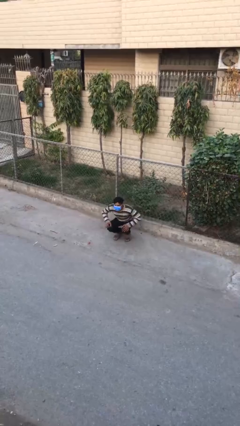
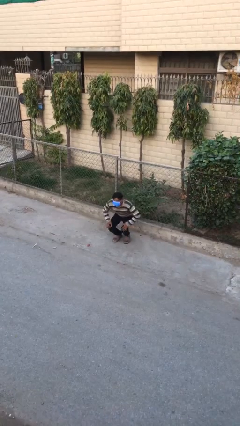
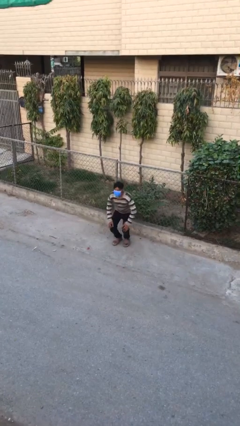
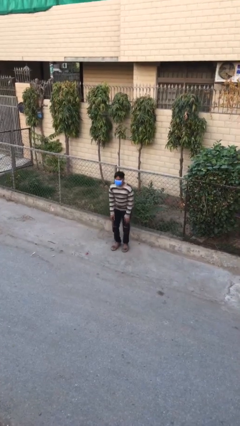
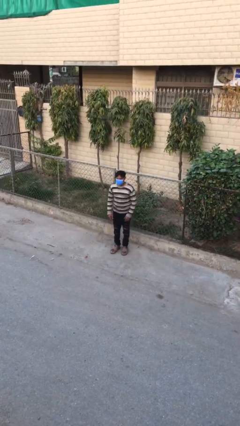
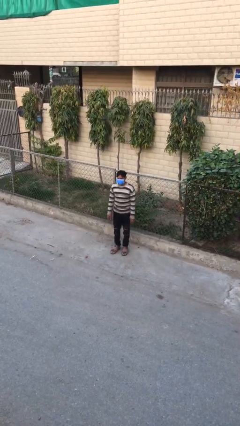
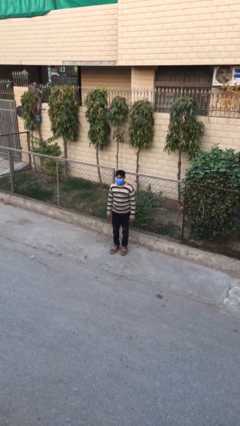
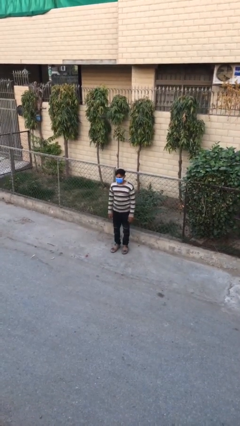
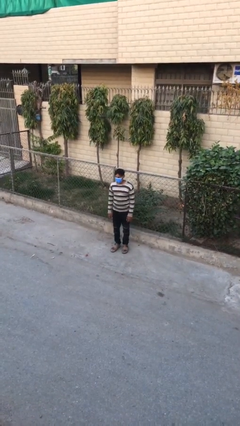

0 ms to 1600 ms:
person stands up

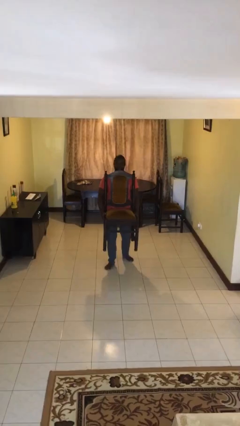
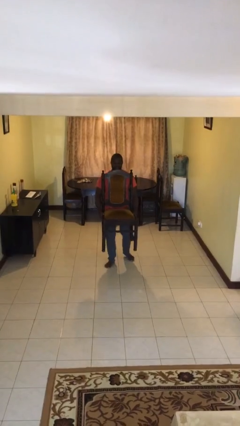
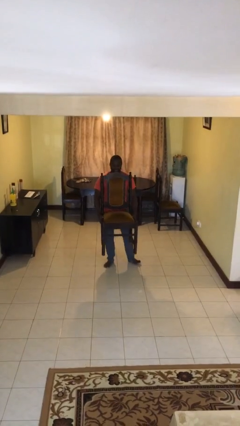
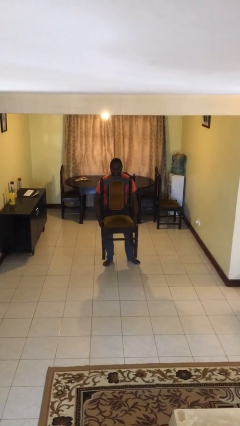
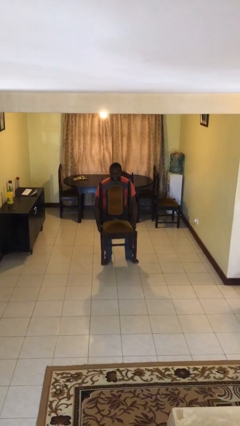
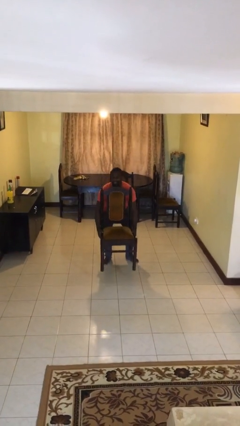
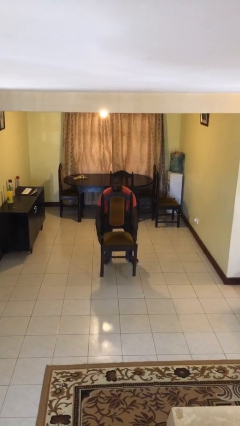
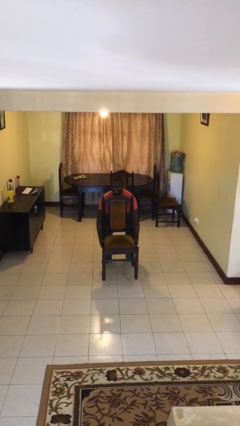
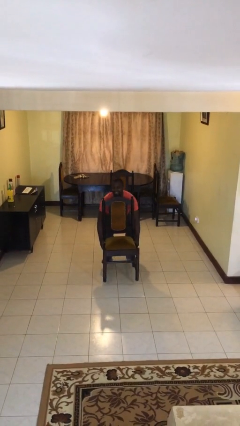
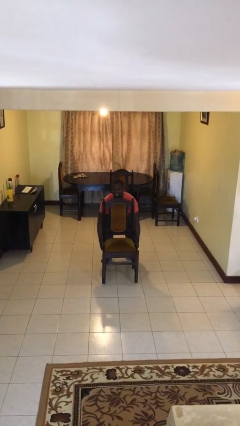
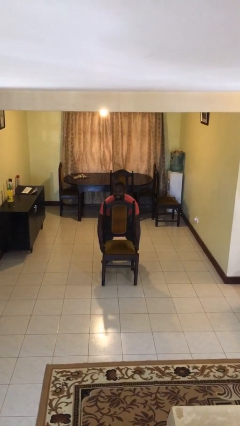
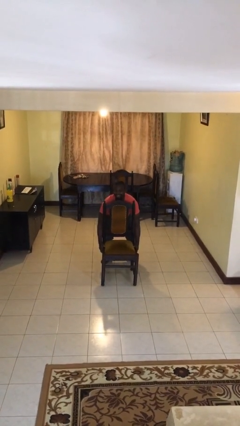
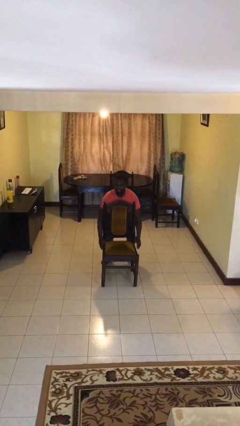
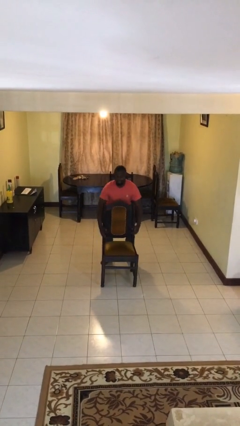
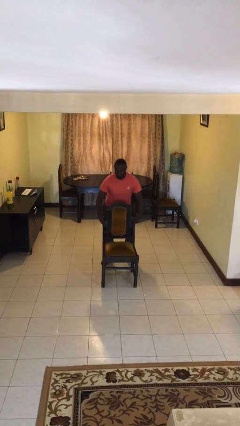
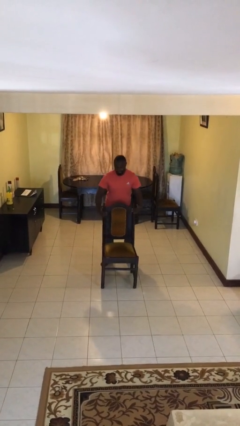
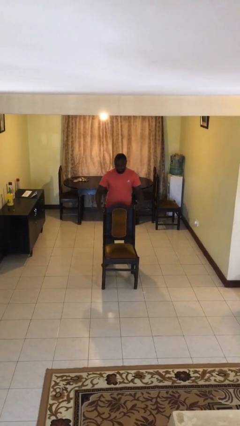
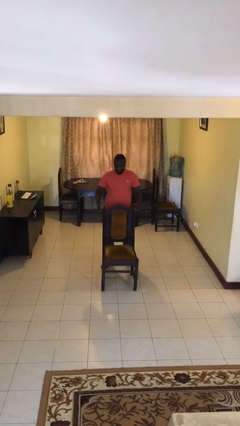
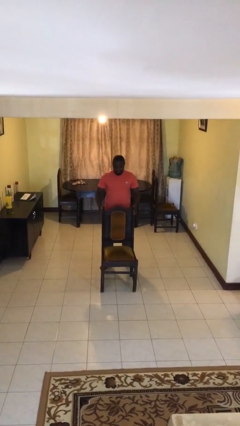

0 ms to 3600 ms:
person puts down object on floor

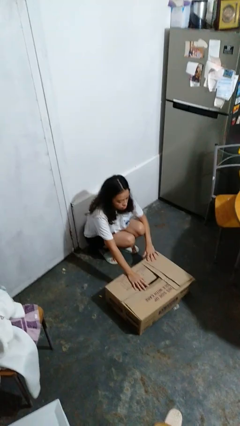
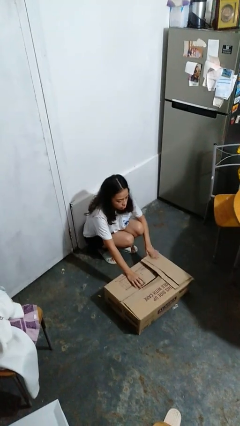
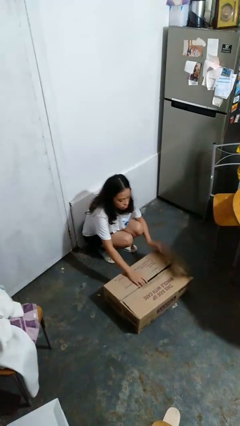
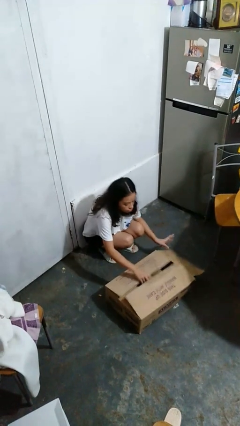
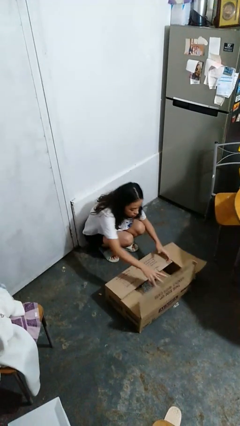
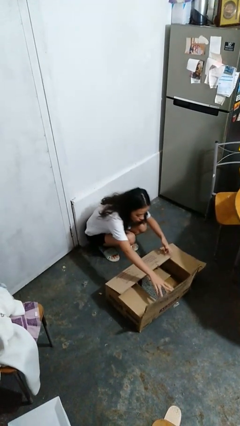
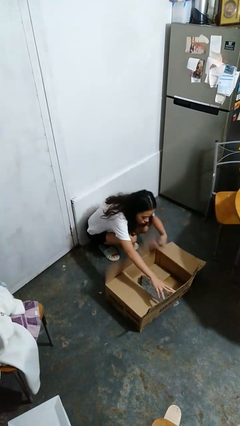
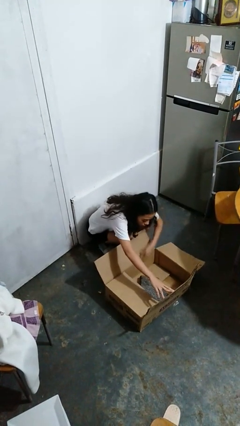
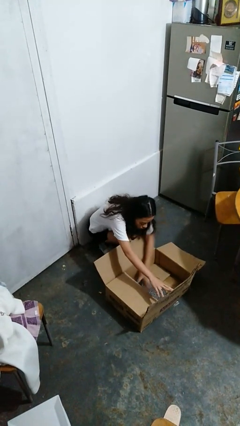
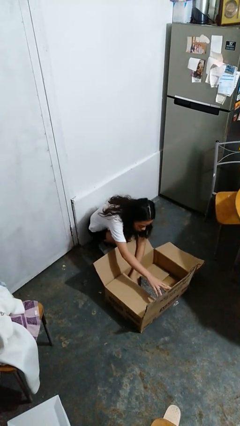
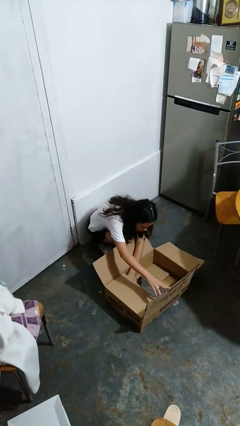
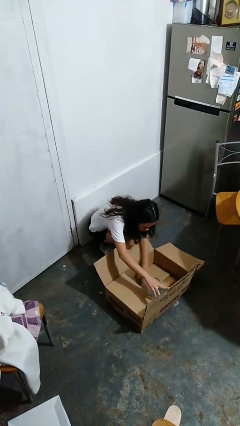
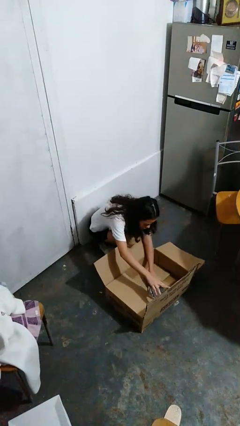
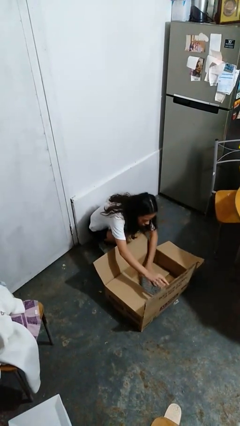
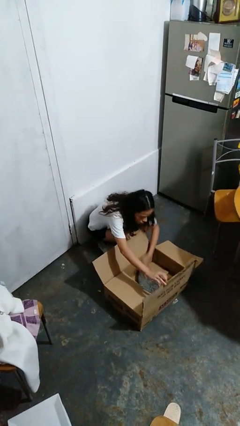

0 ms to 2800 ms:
person searches in box

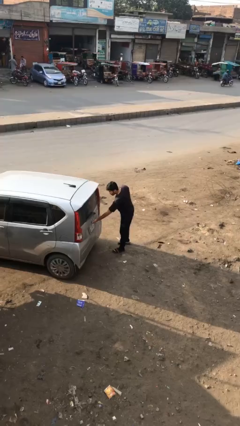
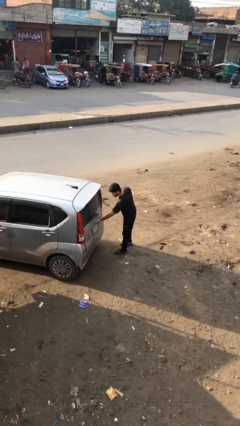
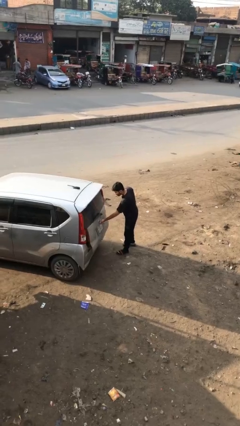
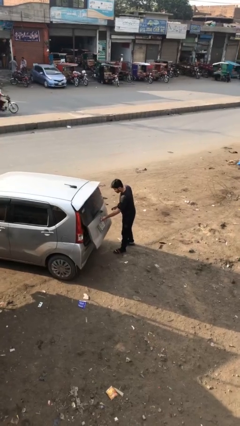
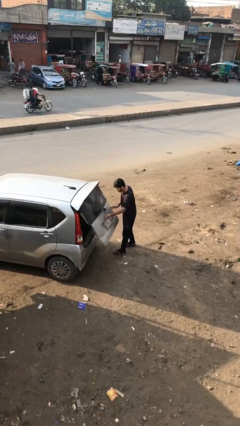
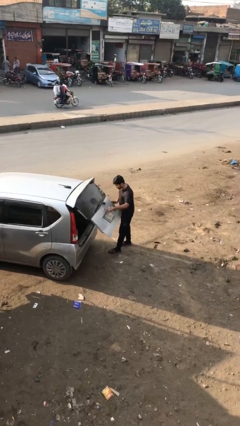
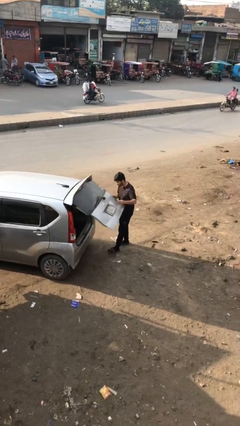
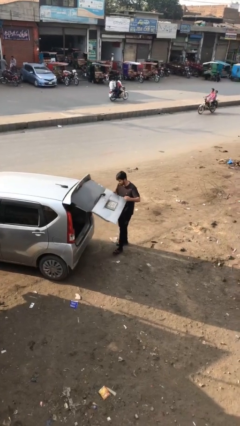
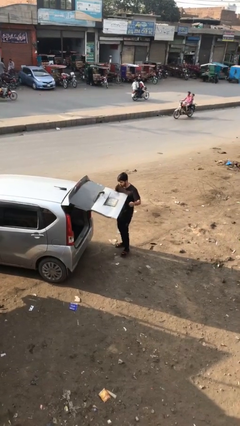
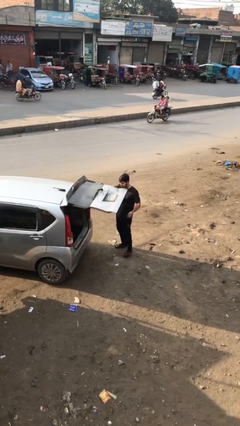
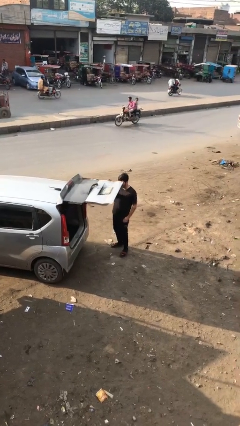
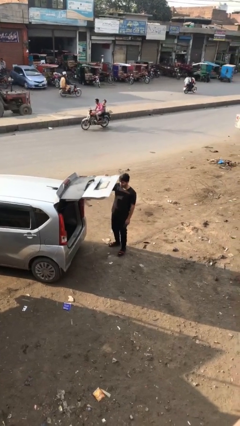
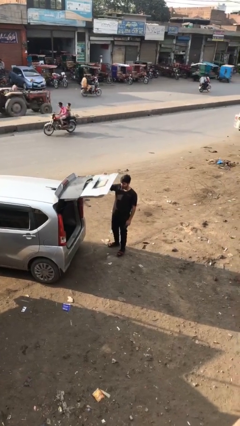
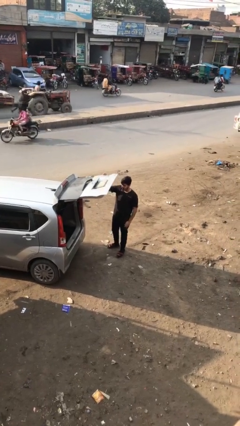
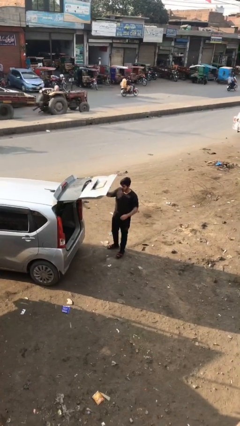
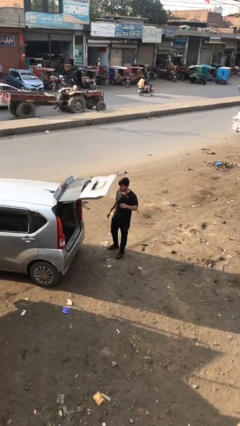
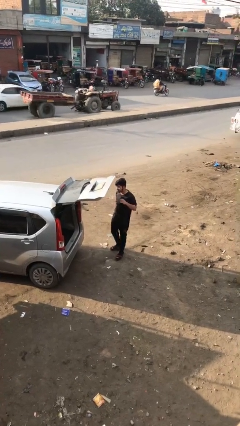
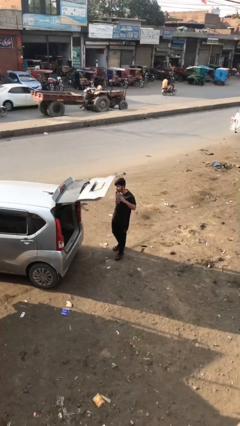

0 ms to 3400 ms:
person opens car trunk

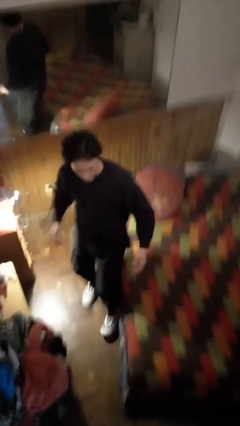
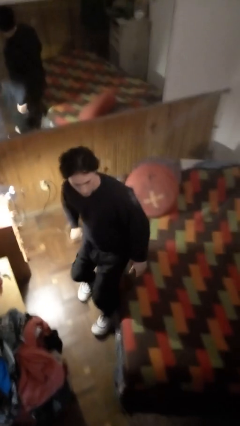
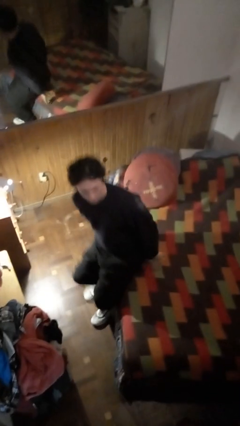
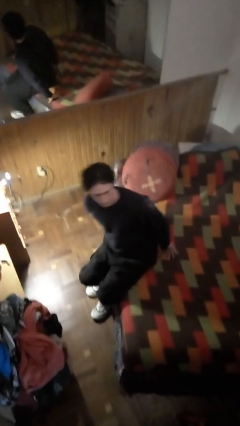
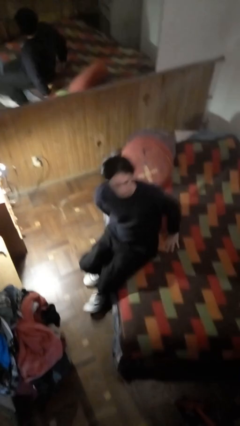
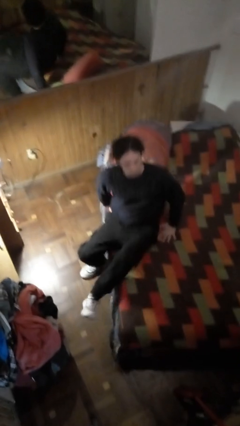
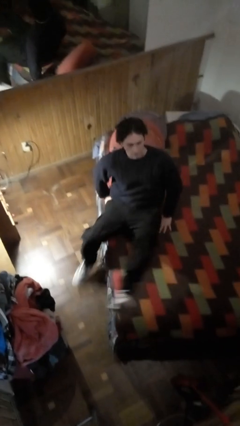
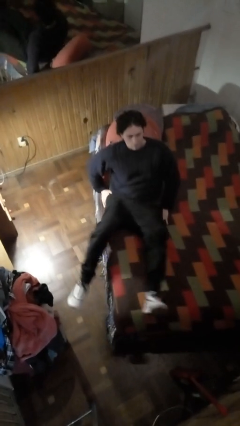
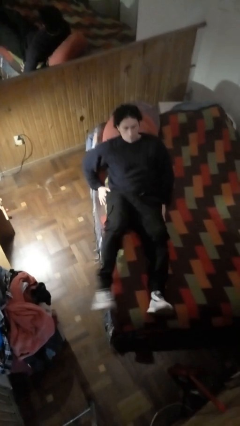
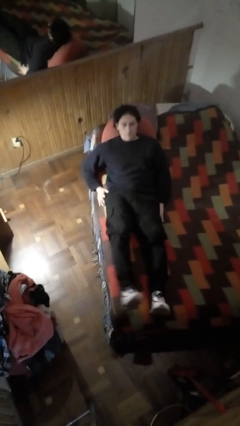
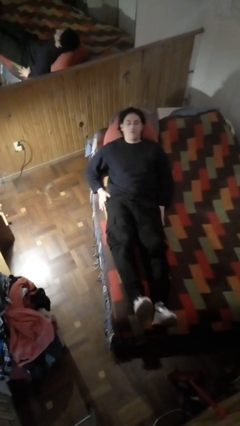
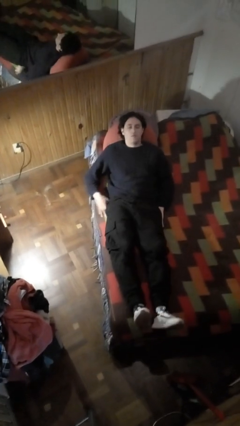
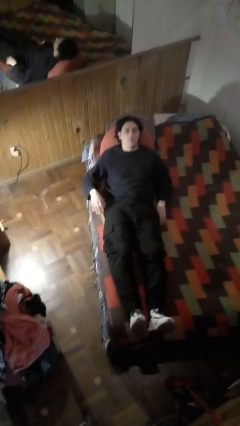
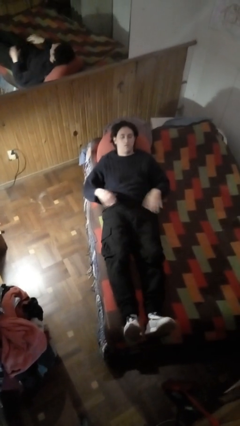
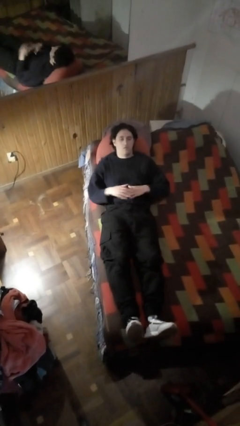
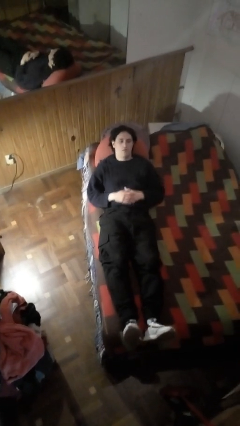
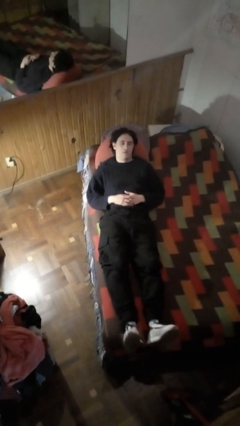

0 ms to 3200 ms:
person lies down on bed

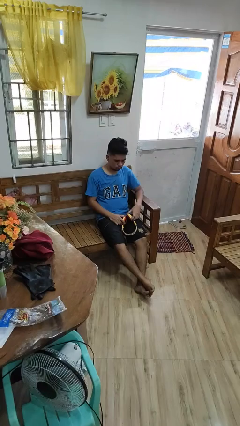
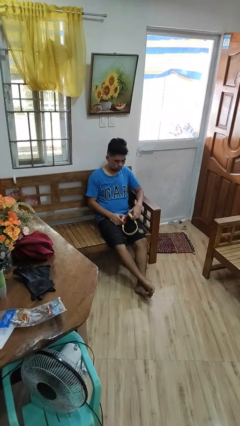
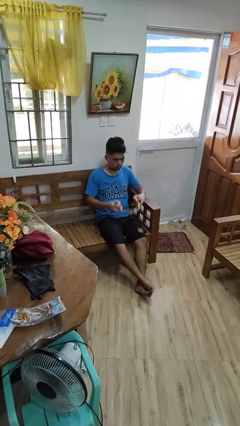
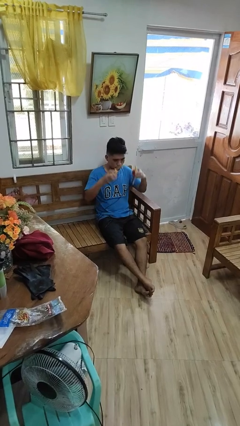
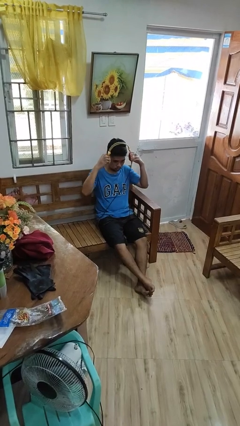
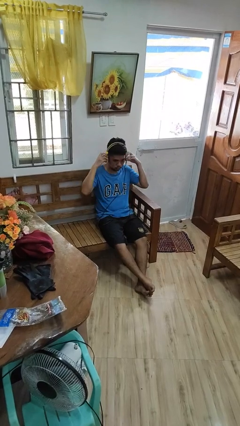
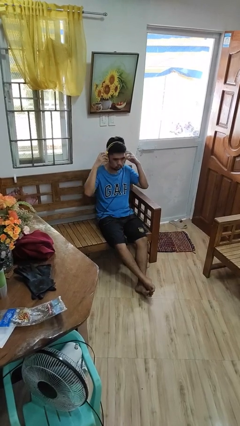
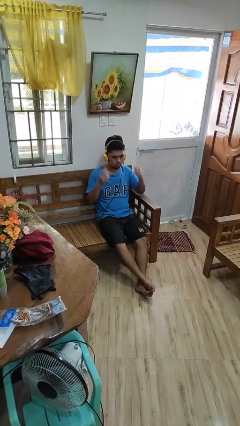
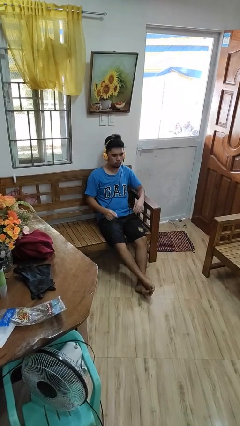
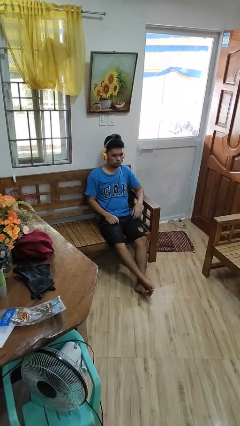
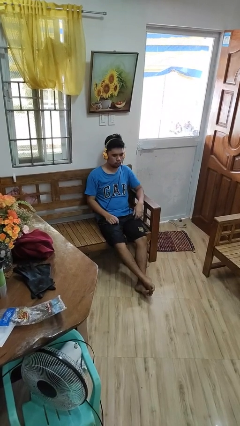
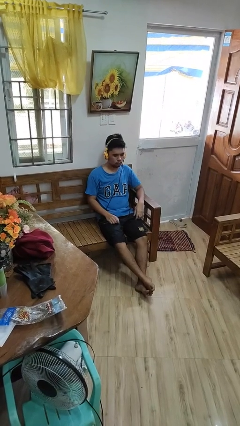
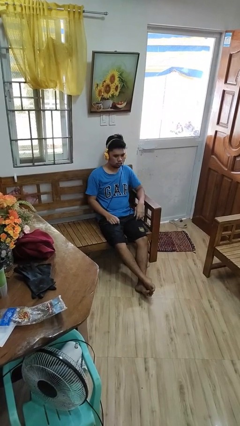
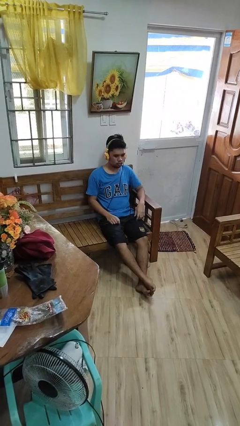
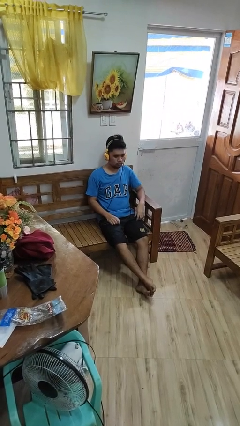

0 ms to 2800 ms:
person puts on headphones
